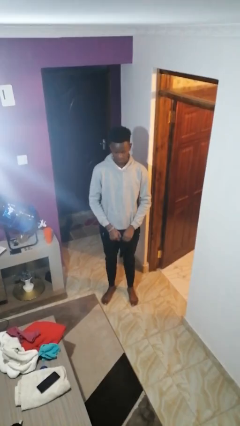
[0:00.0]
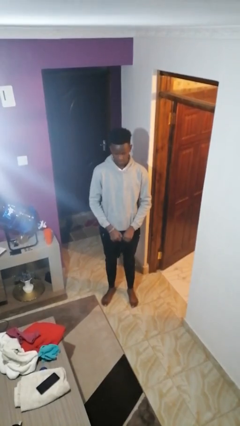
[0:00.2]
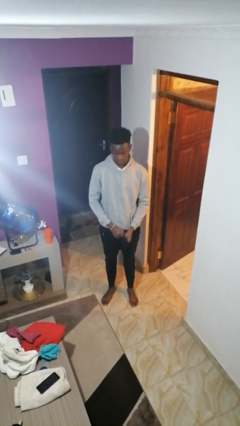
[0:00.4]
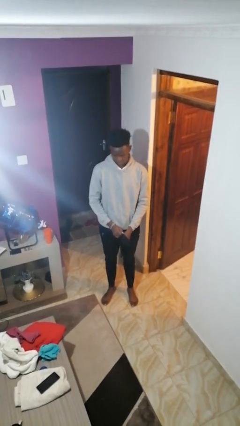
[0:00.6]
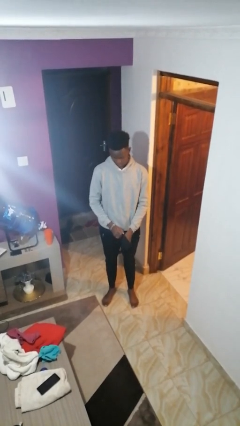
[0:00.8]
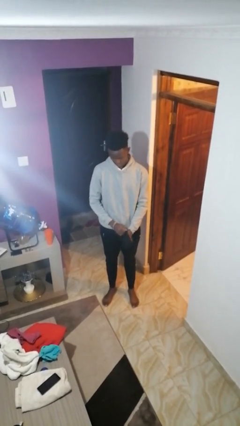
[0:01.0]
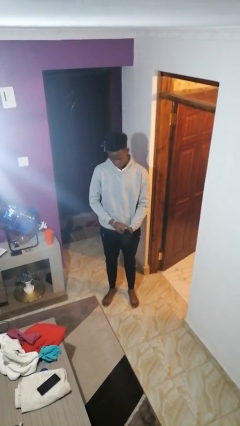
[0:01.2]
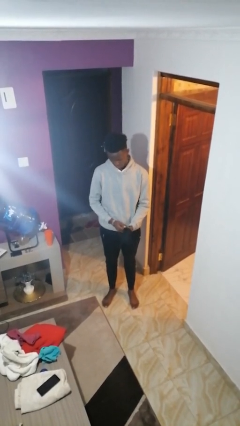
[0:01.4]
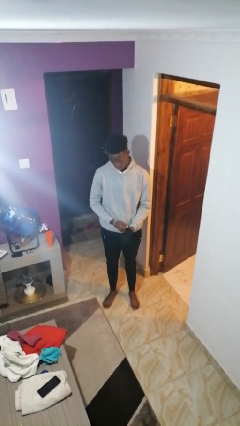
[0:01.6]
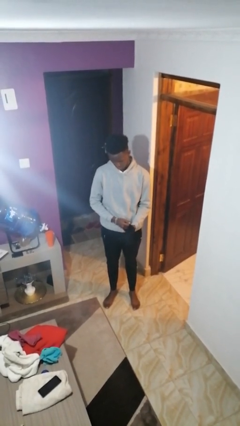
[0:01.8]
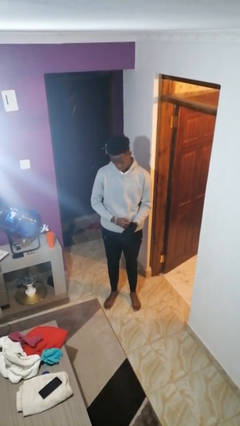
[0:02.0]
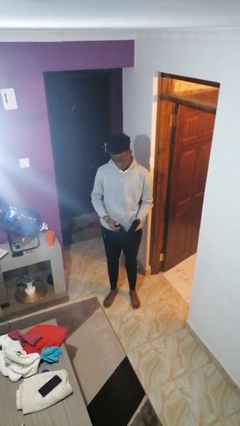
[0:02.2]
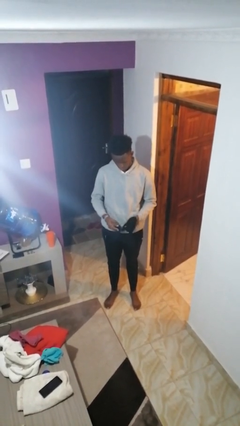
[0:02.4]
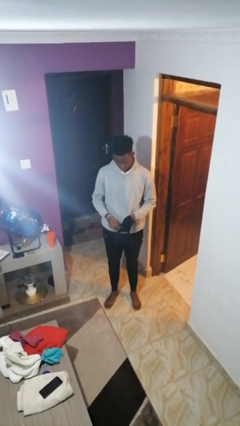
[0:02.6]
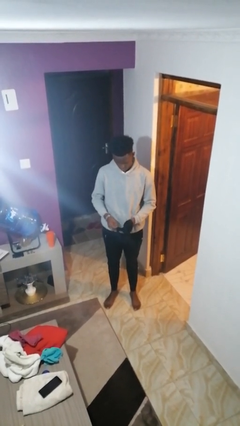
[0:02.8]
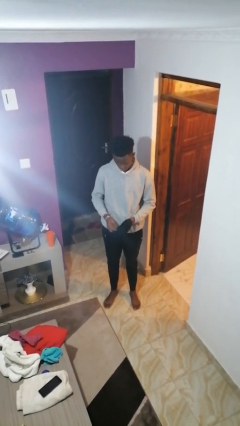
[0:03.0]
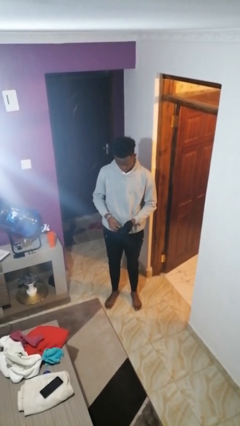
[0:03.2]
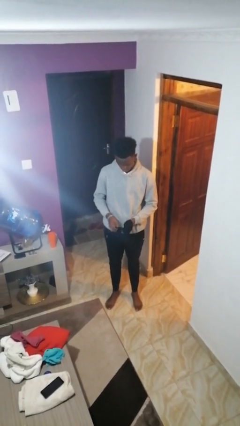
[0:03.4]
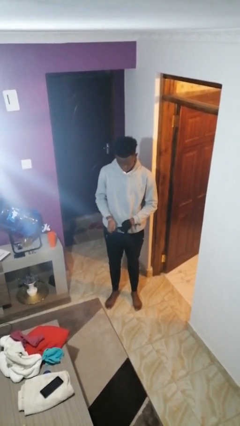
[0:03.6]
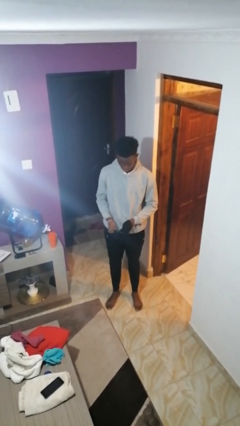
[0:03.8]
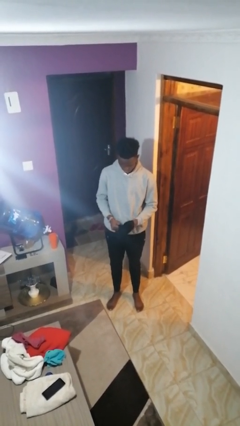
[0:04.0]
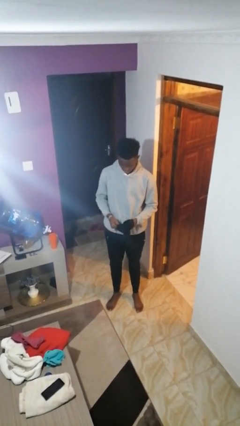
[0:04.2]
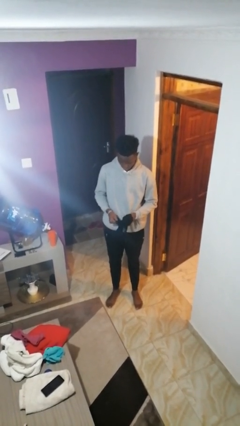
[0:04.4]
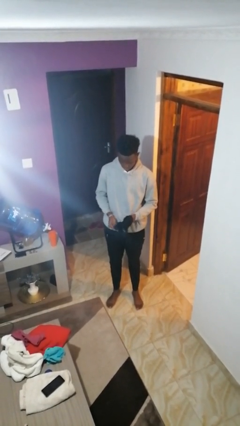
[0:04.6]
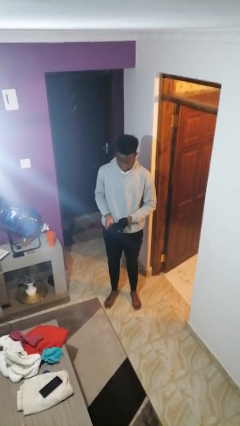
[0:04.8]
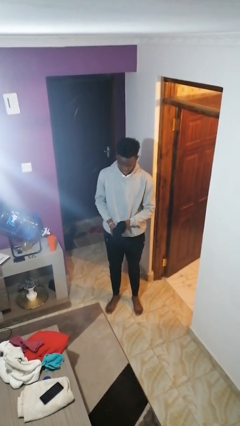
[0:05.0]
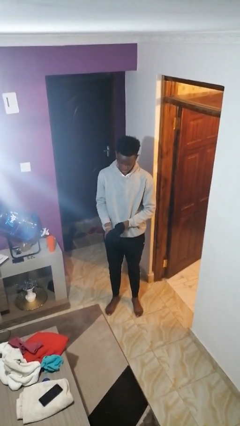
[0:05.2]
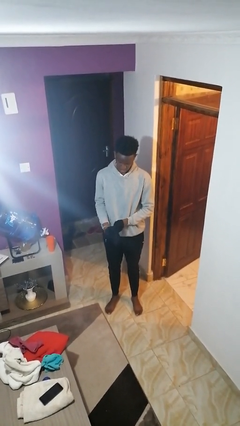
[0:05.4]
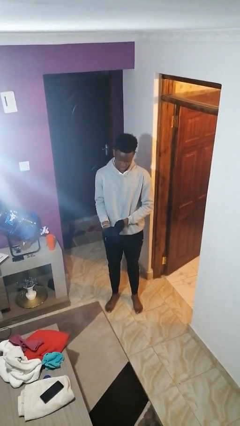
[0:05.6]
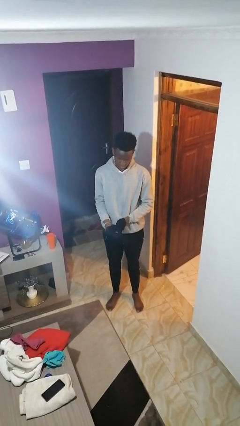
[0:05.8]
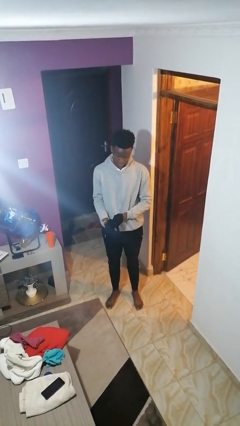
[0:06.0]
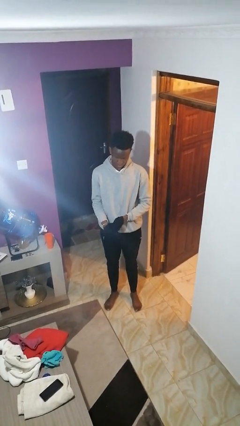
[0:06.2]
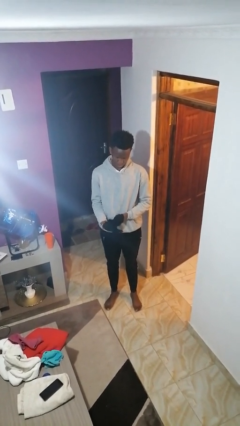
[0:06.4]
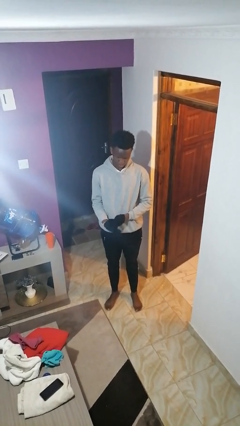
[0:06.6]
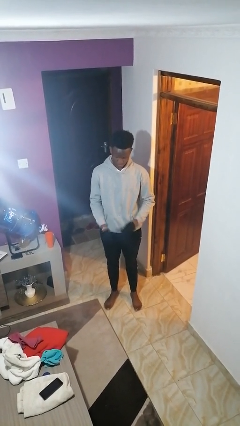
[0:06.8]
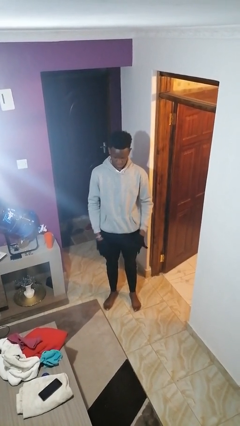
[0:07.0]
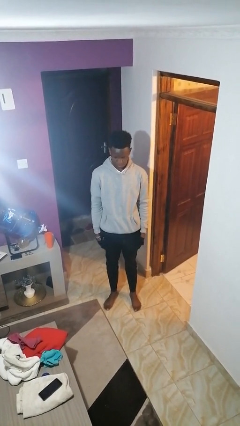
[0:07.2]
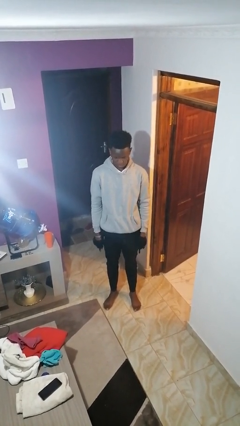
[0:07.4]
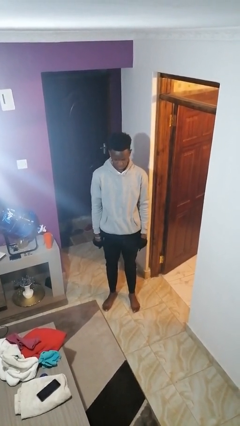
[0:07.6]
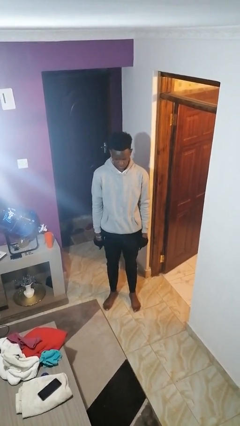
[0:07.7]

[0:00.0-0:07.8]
person puts on gloves

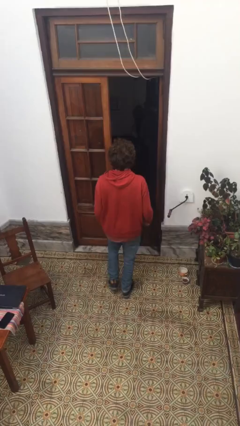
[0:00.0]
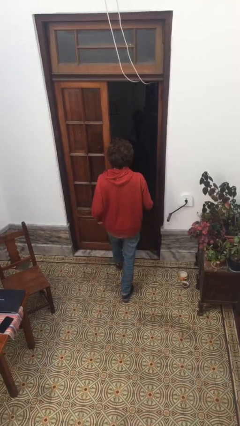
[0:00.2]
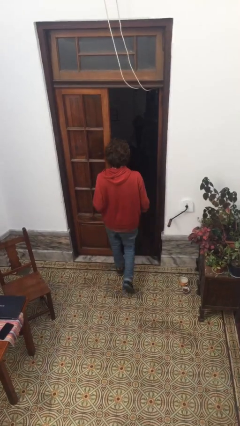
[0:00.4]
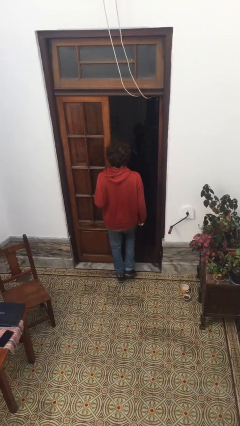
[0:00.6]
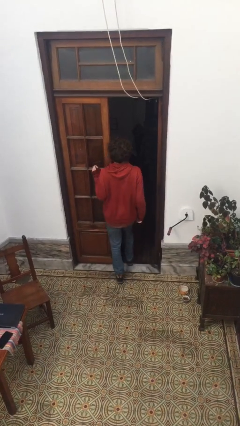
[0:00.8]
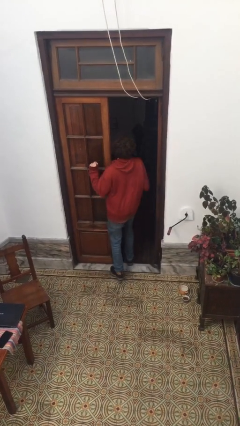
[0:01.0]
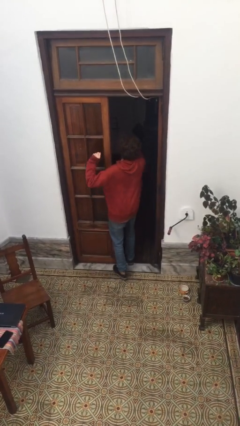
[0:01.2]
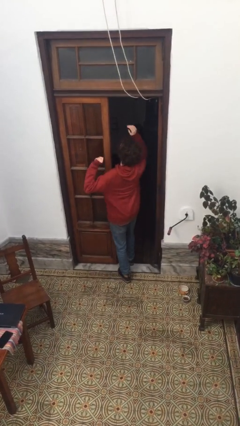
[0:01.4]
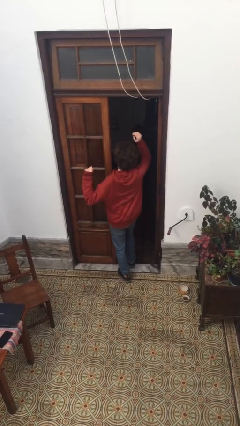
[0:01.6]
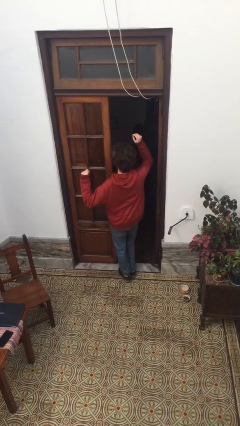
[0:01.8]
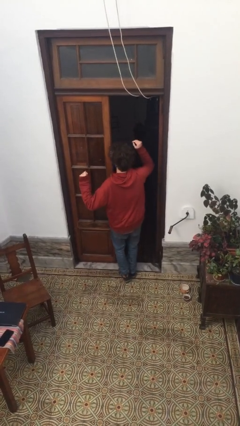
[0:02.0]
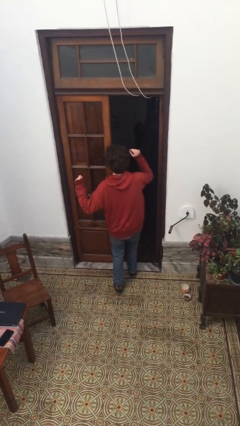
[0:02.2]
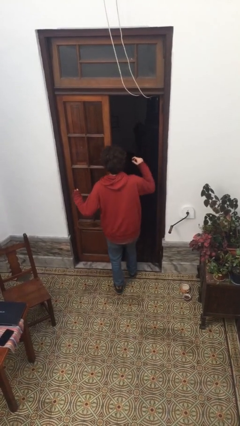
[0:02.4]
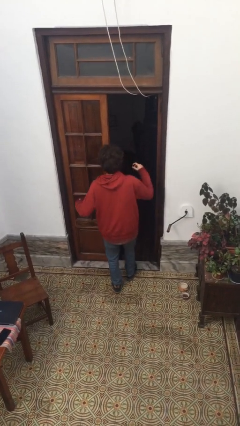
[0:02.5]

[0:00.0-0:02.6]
person bumps into wall

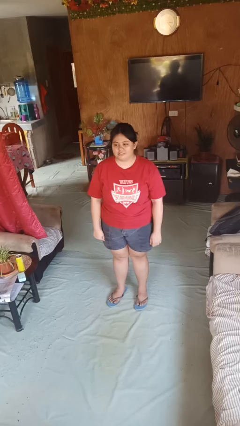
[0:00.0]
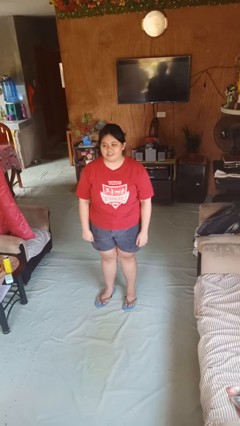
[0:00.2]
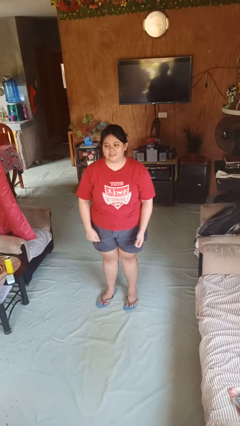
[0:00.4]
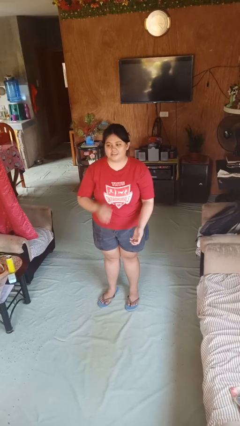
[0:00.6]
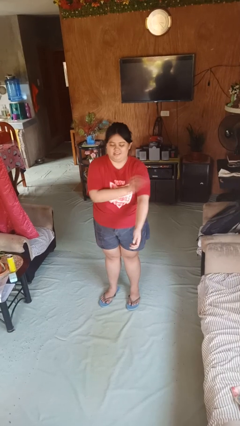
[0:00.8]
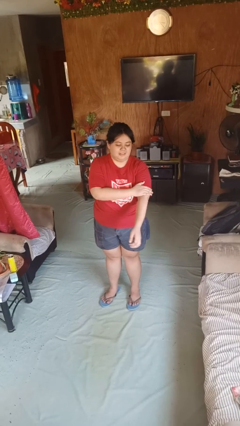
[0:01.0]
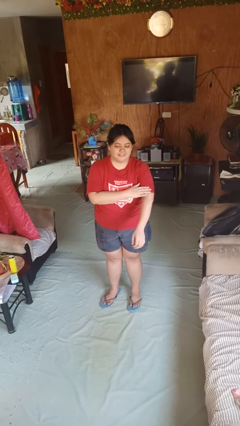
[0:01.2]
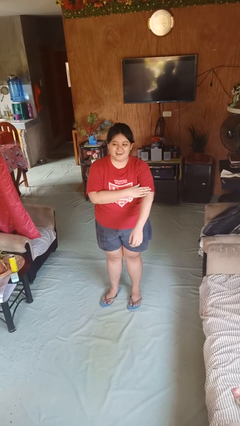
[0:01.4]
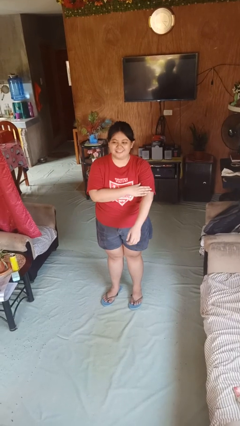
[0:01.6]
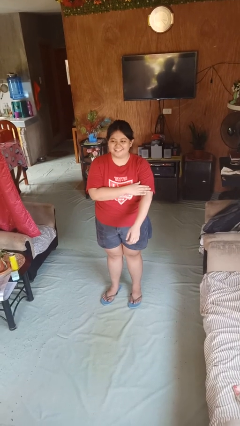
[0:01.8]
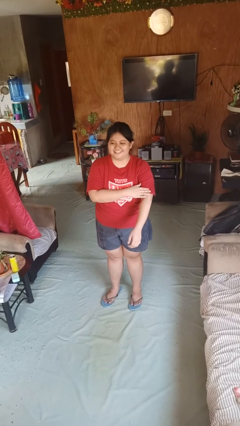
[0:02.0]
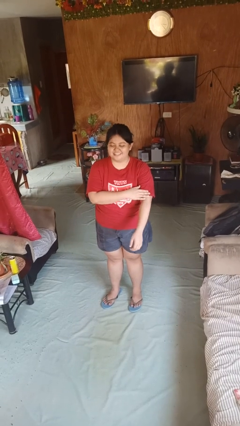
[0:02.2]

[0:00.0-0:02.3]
person swats bug

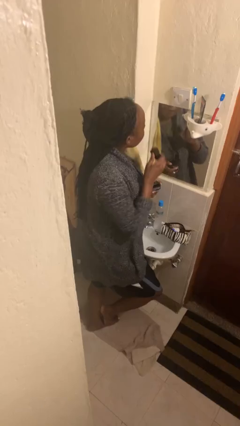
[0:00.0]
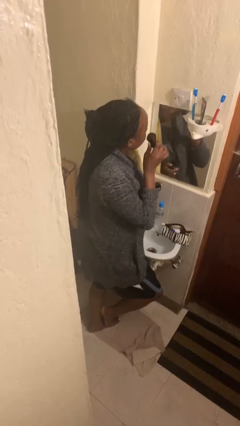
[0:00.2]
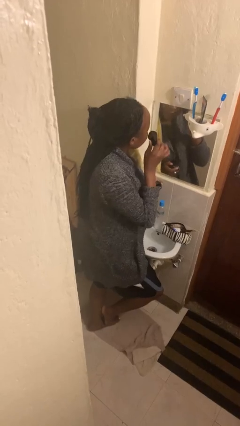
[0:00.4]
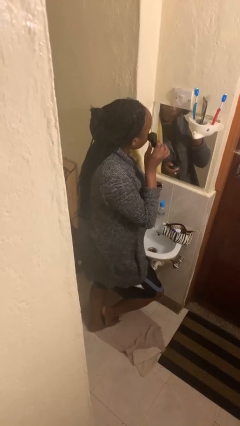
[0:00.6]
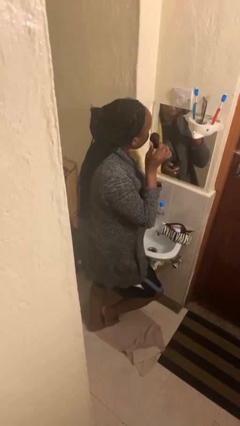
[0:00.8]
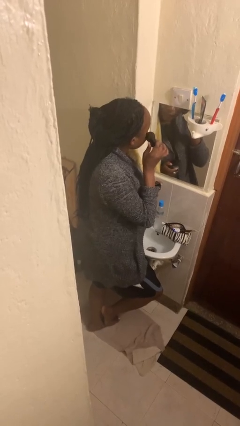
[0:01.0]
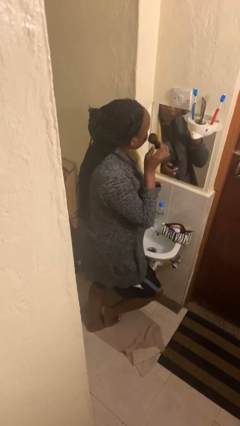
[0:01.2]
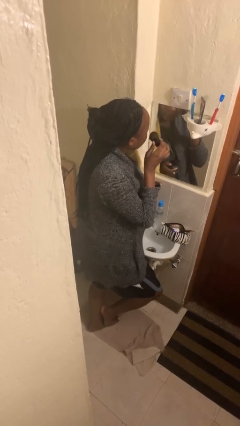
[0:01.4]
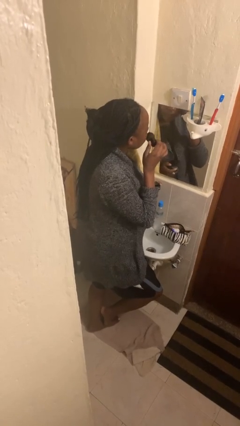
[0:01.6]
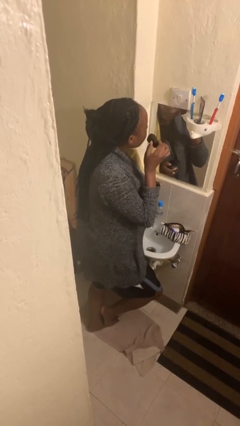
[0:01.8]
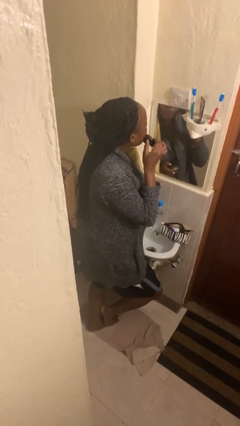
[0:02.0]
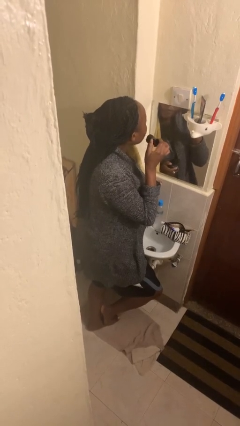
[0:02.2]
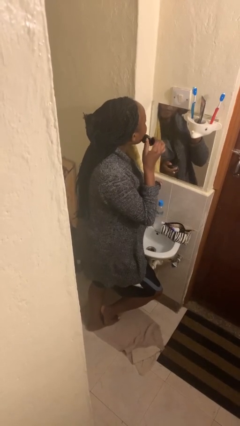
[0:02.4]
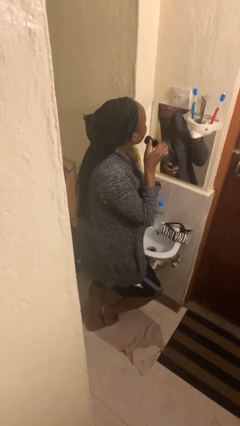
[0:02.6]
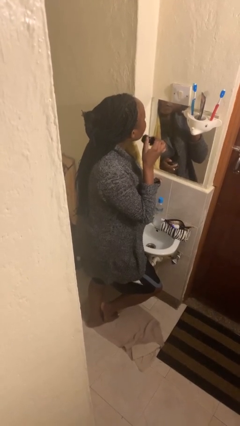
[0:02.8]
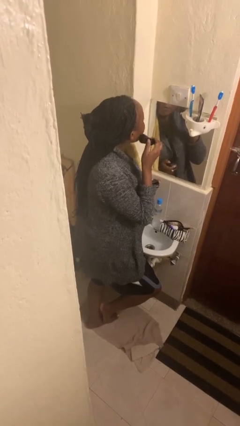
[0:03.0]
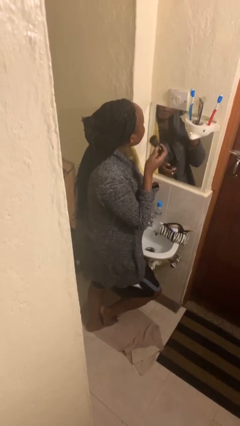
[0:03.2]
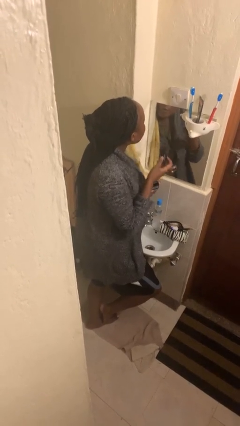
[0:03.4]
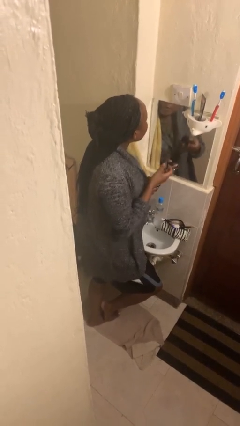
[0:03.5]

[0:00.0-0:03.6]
person applies foundation makeup

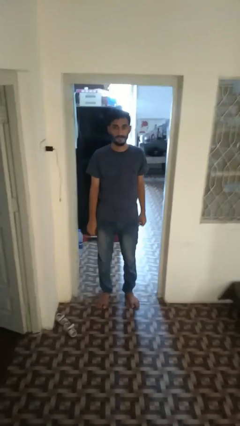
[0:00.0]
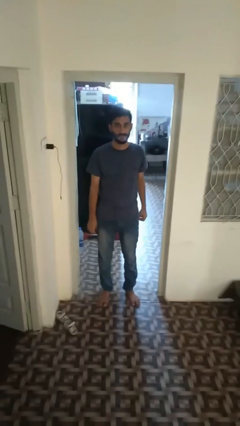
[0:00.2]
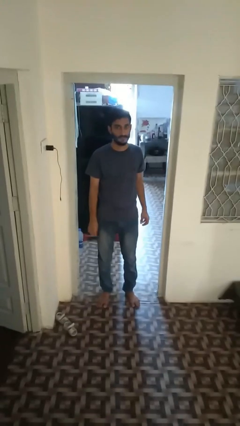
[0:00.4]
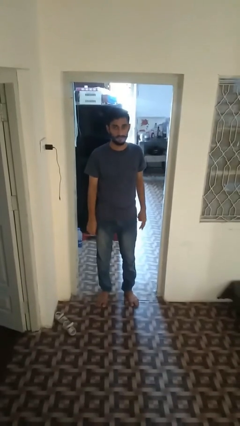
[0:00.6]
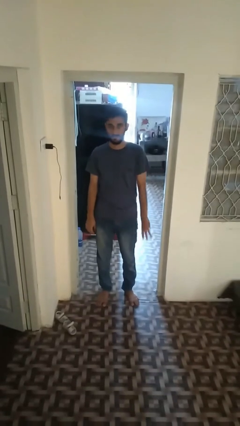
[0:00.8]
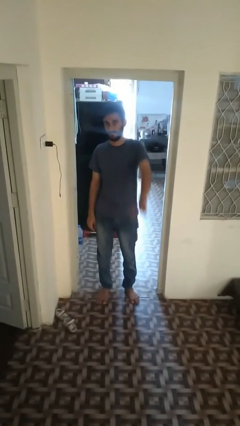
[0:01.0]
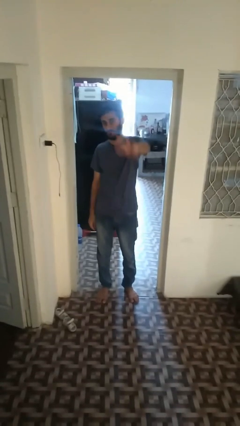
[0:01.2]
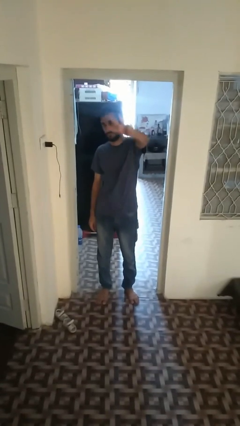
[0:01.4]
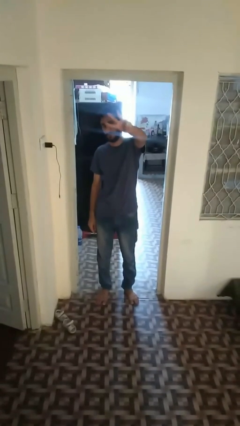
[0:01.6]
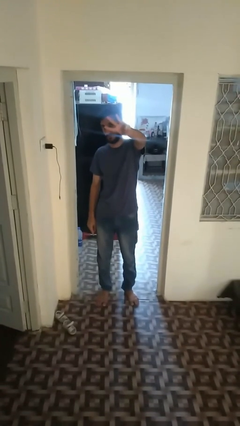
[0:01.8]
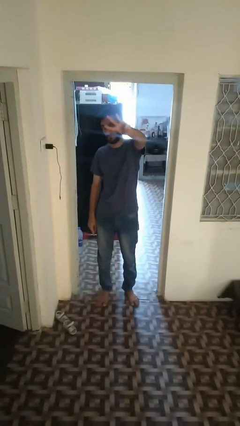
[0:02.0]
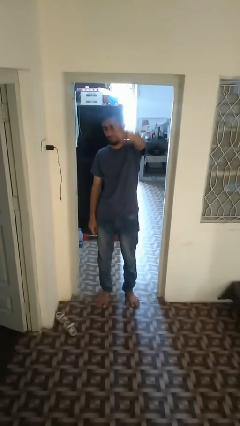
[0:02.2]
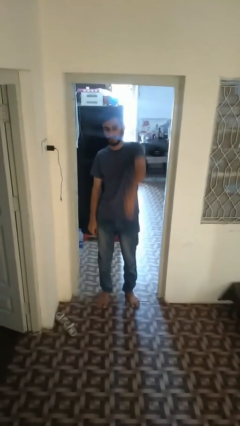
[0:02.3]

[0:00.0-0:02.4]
person gestures number three
